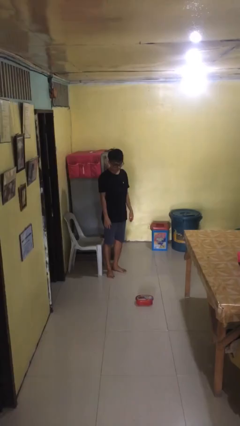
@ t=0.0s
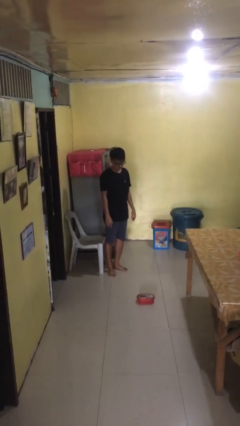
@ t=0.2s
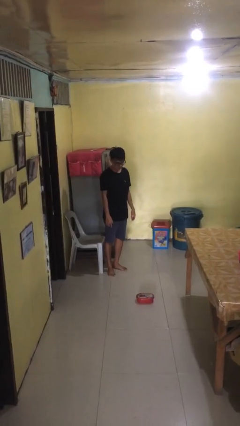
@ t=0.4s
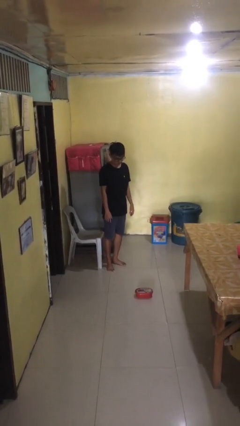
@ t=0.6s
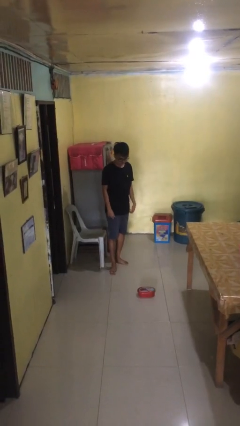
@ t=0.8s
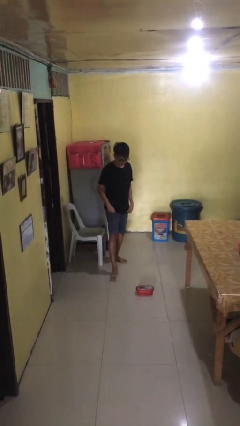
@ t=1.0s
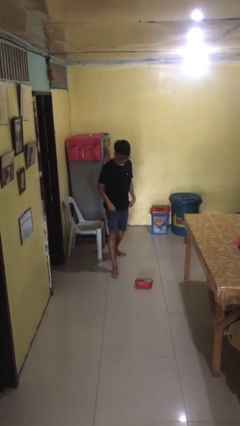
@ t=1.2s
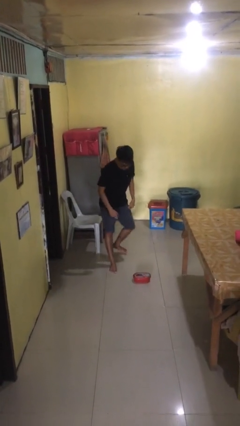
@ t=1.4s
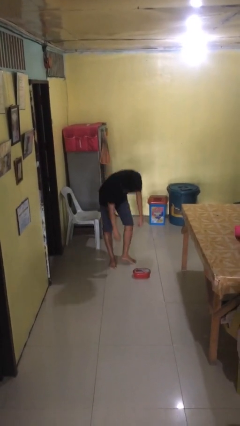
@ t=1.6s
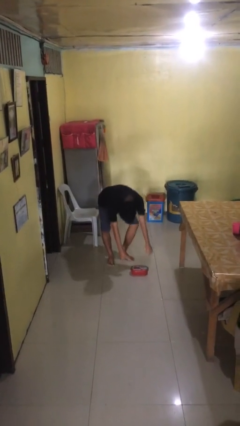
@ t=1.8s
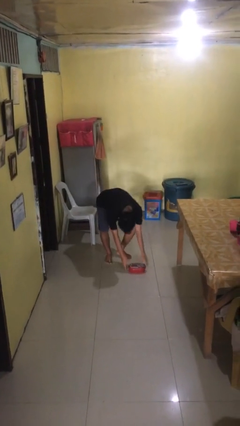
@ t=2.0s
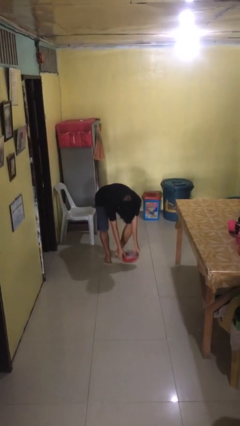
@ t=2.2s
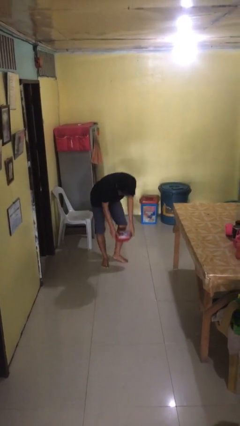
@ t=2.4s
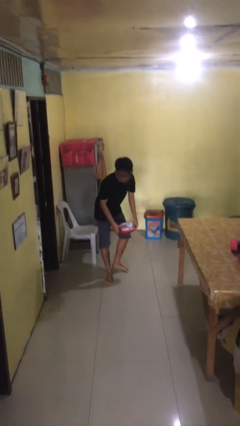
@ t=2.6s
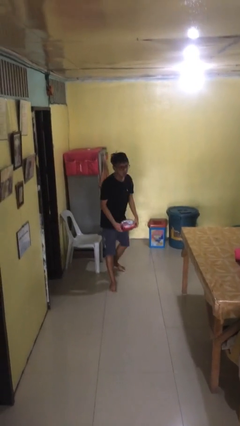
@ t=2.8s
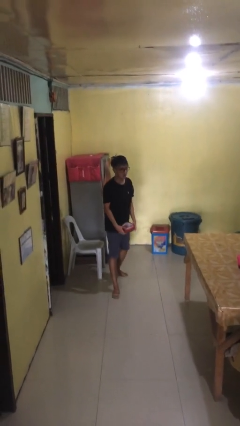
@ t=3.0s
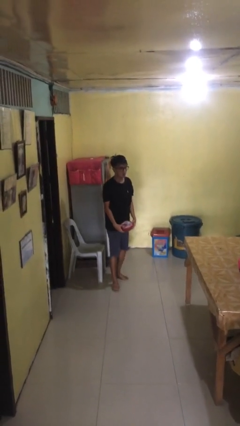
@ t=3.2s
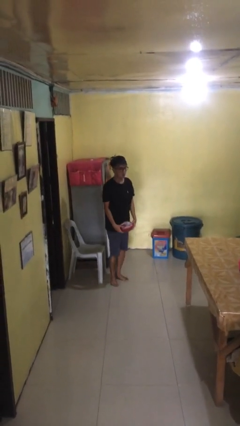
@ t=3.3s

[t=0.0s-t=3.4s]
person picks up object from floor

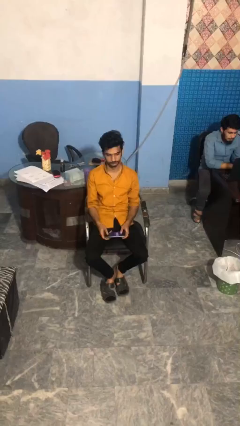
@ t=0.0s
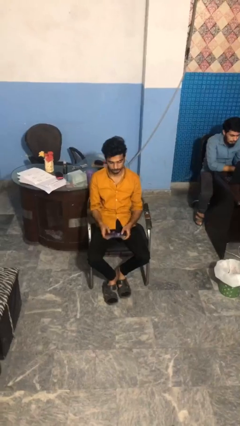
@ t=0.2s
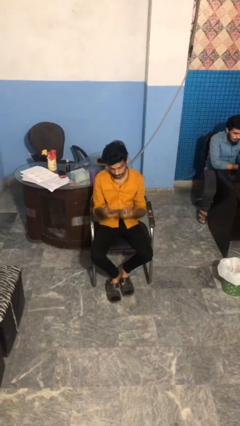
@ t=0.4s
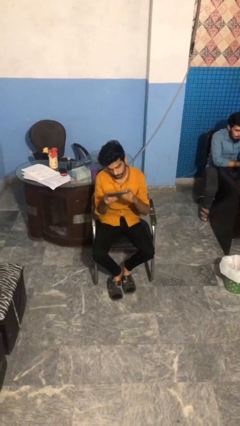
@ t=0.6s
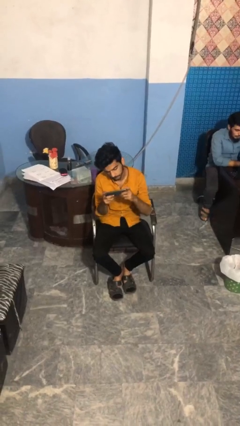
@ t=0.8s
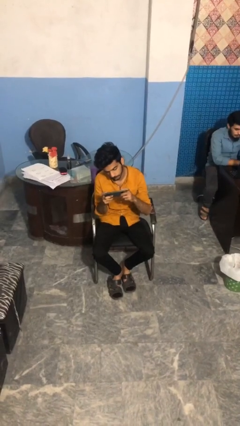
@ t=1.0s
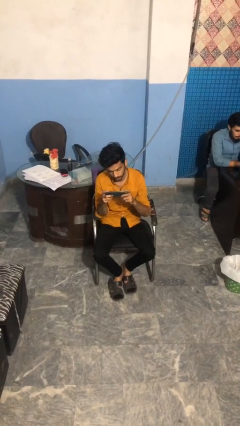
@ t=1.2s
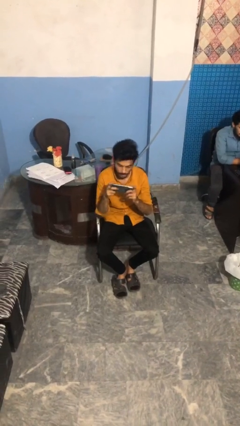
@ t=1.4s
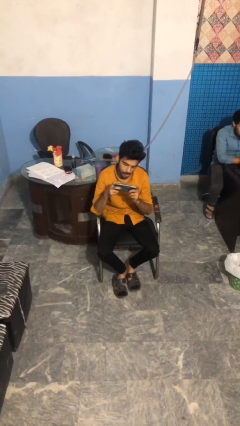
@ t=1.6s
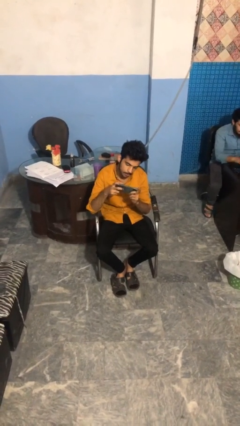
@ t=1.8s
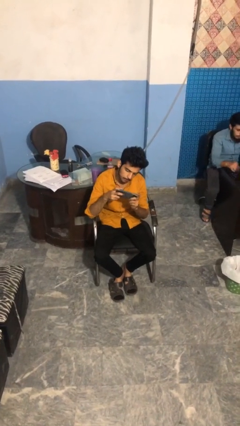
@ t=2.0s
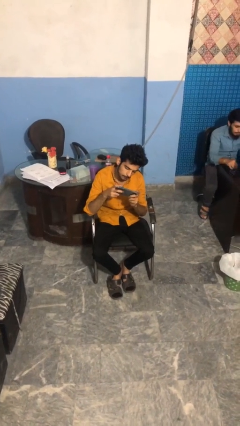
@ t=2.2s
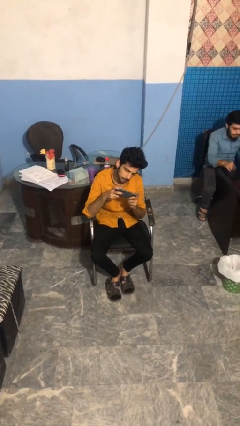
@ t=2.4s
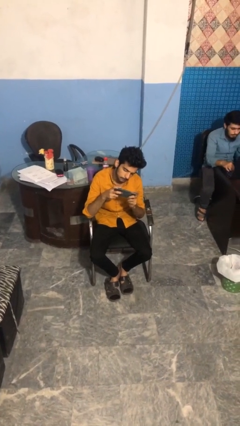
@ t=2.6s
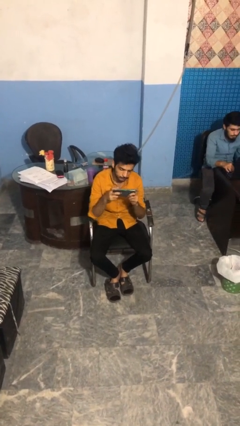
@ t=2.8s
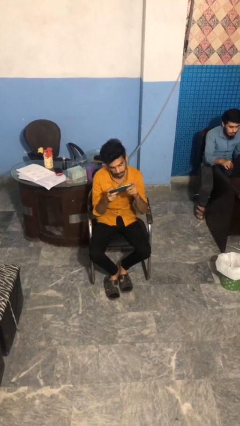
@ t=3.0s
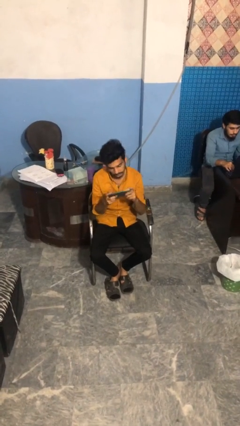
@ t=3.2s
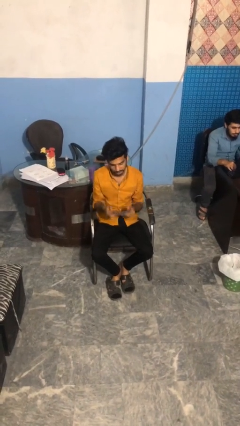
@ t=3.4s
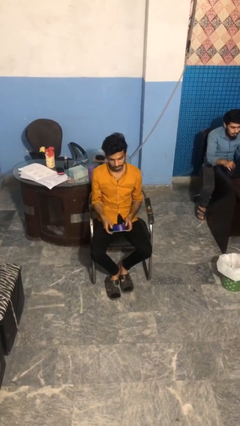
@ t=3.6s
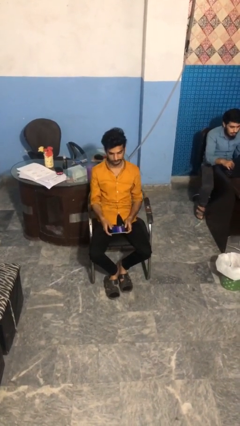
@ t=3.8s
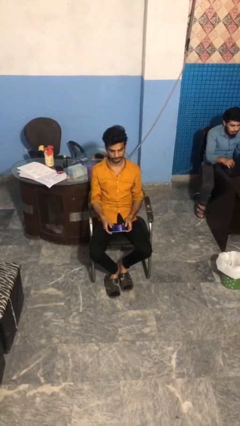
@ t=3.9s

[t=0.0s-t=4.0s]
person interacts with handheld game

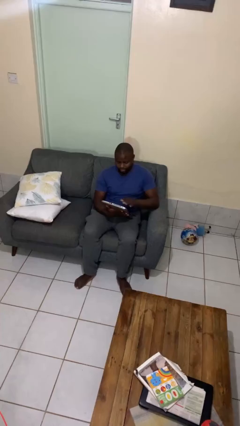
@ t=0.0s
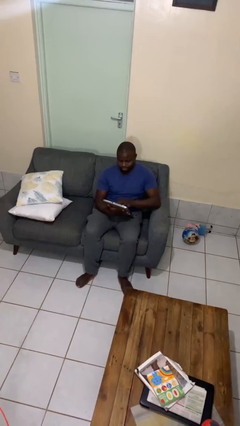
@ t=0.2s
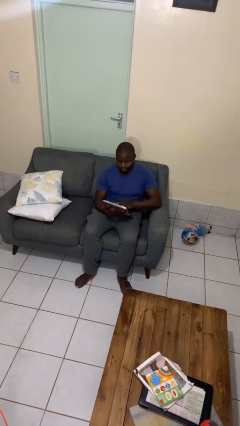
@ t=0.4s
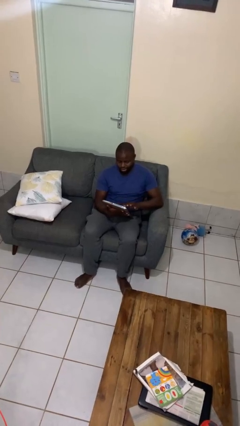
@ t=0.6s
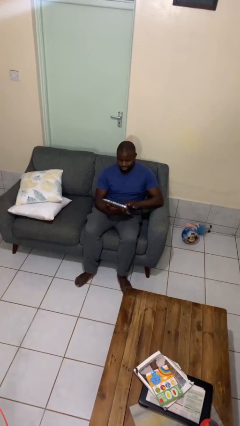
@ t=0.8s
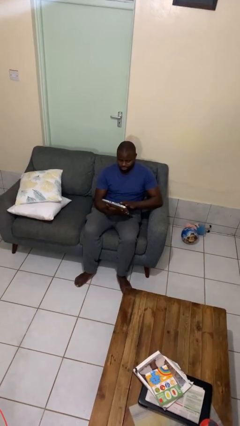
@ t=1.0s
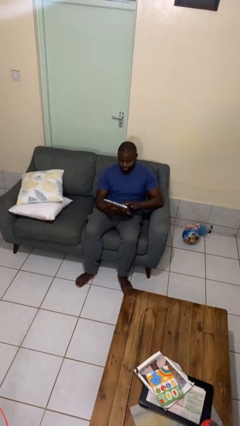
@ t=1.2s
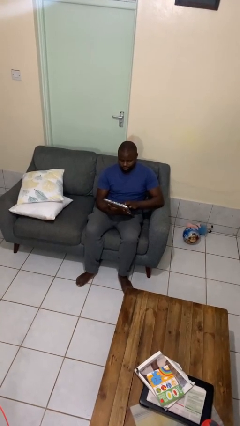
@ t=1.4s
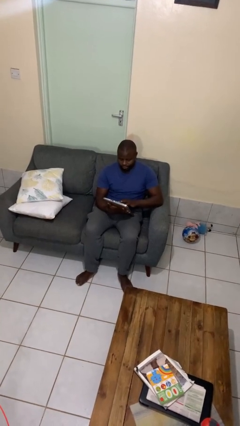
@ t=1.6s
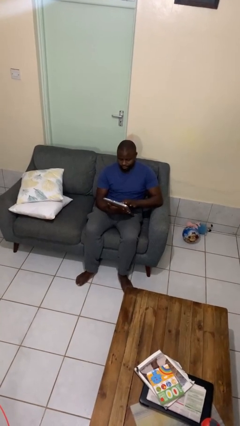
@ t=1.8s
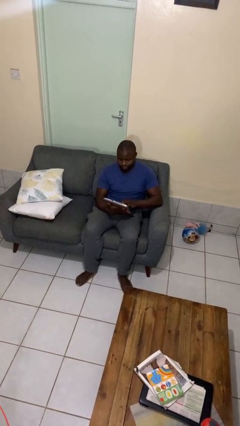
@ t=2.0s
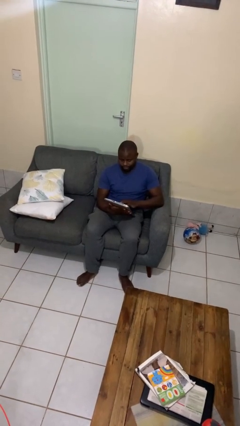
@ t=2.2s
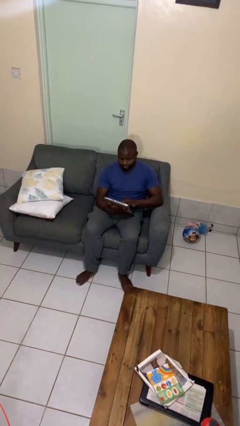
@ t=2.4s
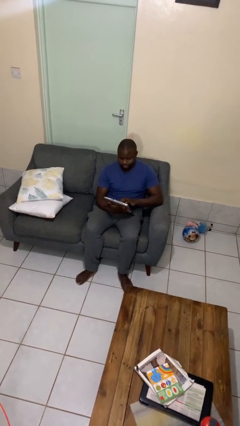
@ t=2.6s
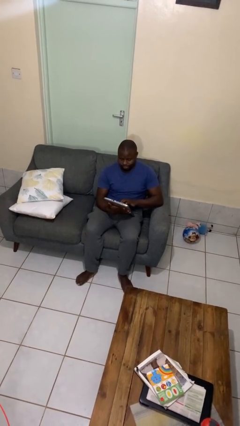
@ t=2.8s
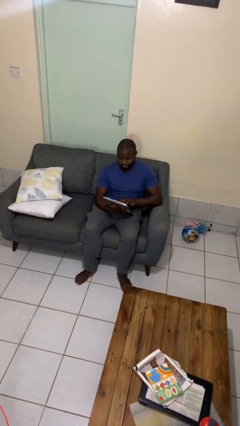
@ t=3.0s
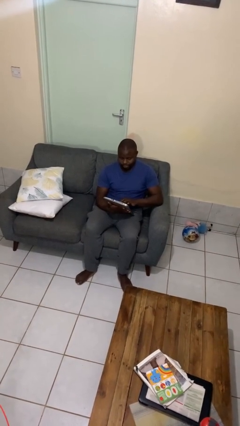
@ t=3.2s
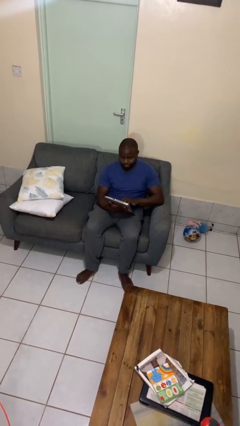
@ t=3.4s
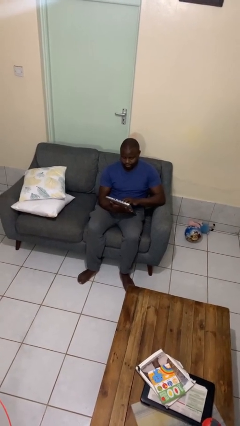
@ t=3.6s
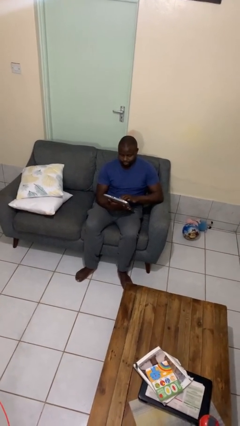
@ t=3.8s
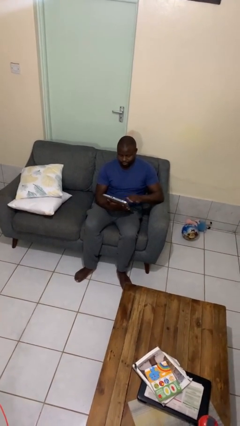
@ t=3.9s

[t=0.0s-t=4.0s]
person interacts with tablet

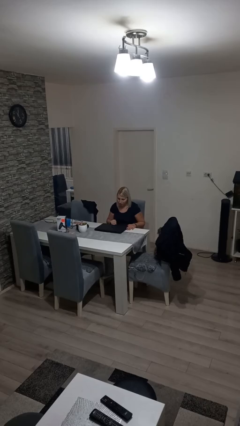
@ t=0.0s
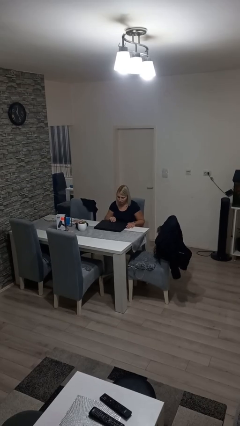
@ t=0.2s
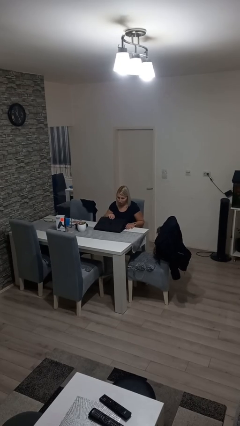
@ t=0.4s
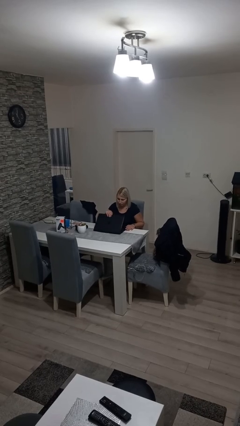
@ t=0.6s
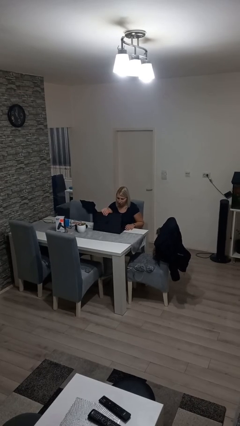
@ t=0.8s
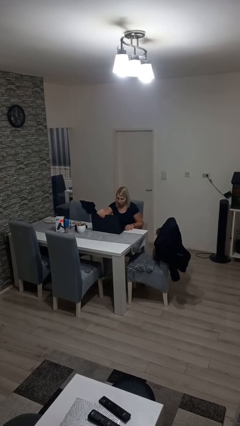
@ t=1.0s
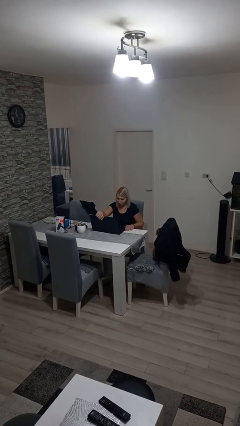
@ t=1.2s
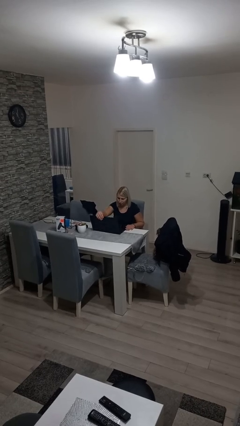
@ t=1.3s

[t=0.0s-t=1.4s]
person opens laptop

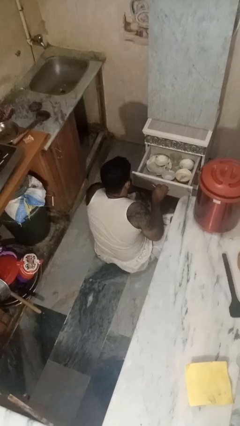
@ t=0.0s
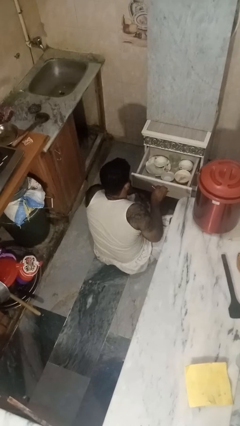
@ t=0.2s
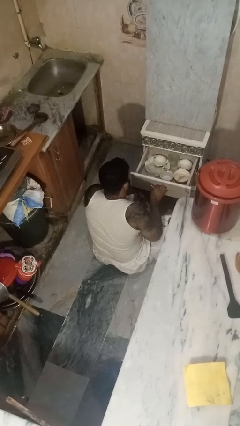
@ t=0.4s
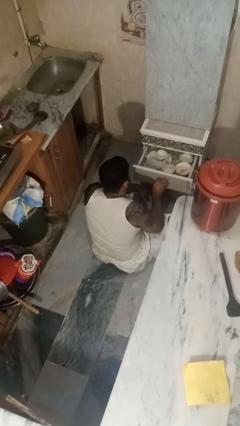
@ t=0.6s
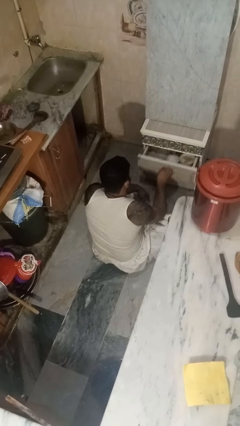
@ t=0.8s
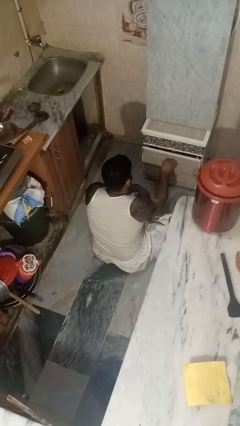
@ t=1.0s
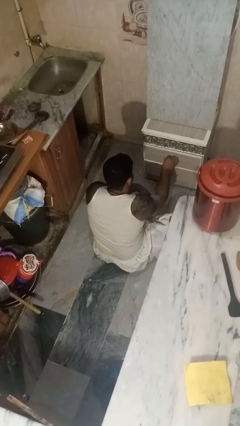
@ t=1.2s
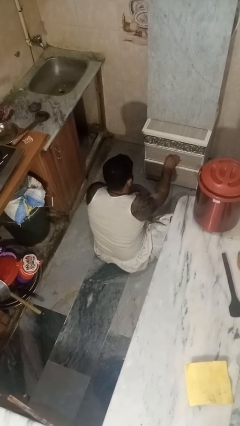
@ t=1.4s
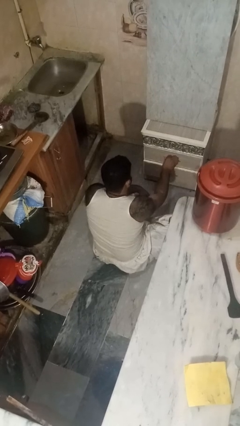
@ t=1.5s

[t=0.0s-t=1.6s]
person closes kitchen drawer

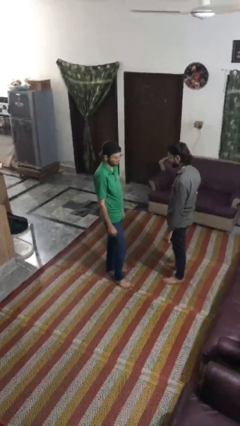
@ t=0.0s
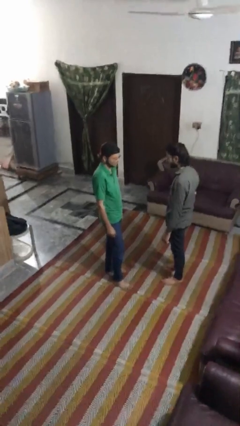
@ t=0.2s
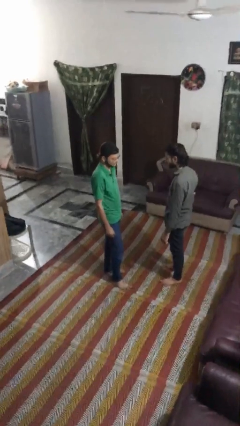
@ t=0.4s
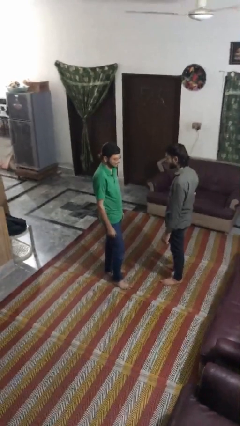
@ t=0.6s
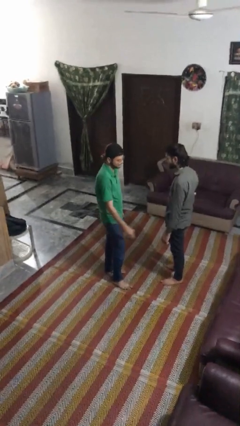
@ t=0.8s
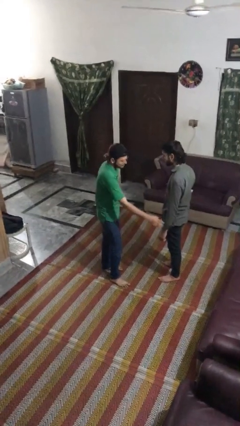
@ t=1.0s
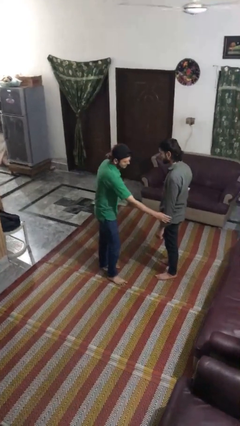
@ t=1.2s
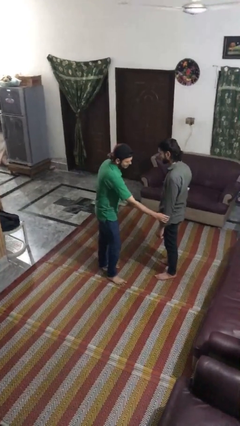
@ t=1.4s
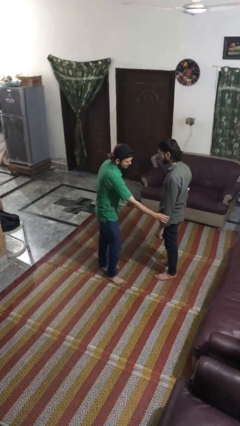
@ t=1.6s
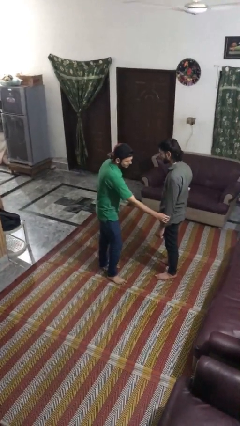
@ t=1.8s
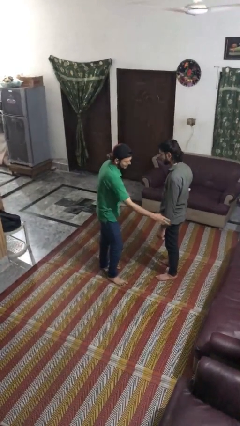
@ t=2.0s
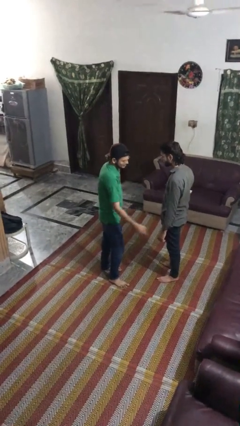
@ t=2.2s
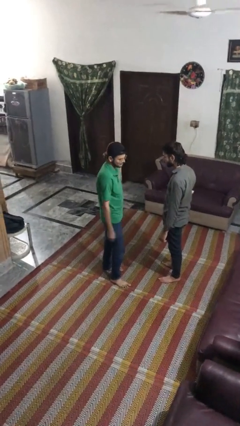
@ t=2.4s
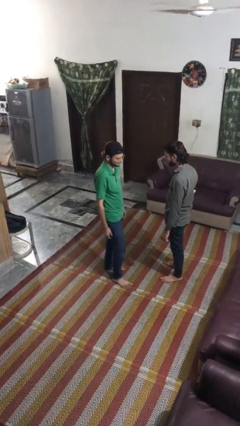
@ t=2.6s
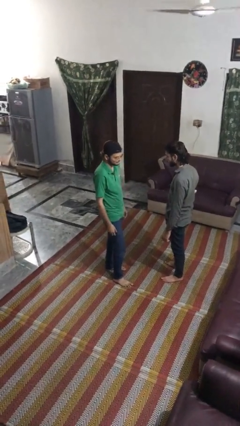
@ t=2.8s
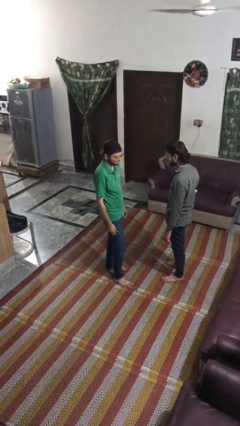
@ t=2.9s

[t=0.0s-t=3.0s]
person grabs person by forearm
